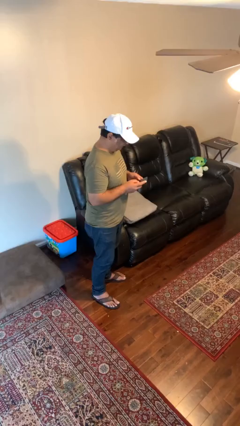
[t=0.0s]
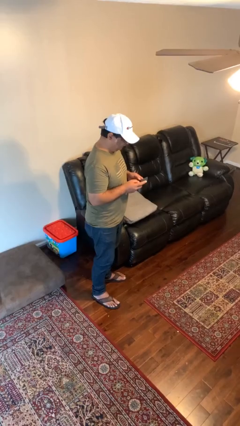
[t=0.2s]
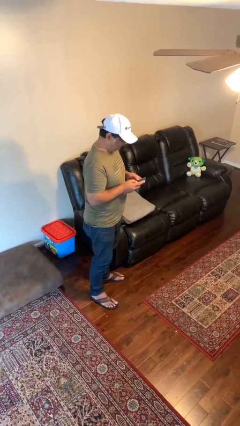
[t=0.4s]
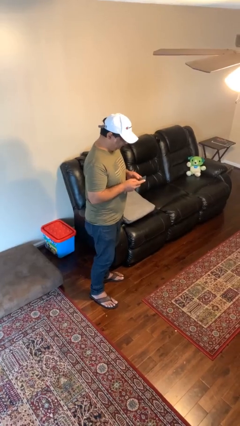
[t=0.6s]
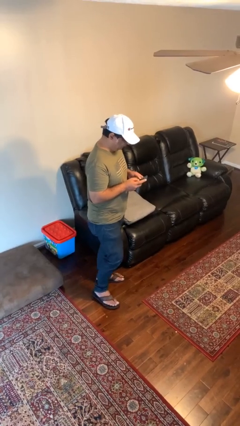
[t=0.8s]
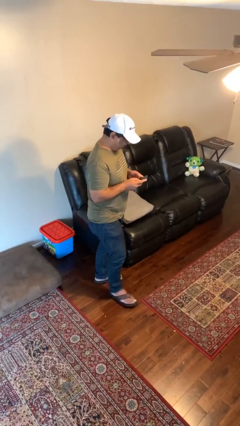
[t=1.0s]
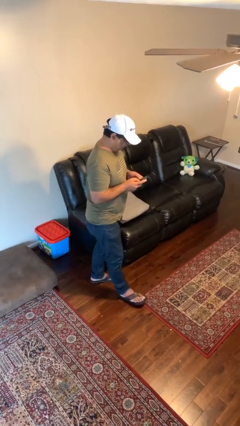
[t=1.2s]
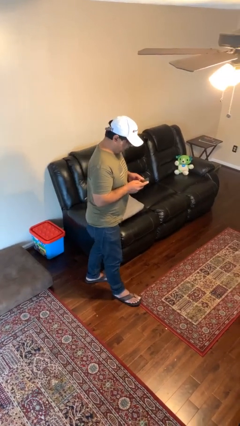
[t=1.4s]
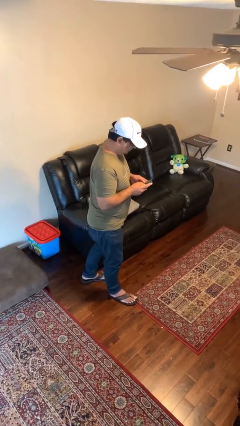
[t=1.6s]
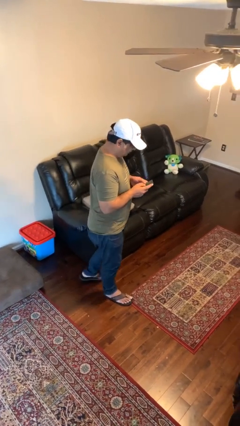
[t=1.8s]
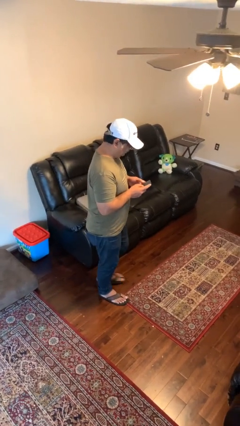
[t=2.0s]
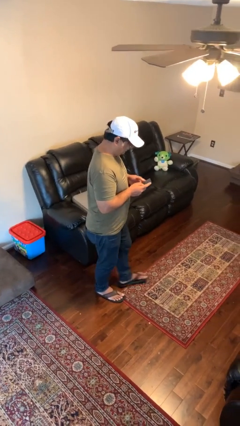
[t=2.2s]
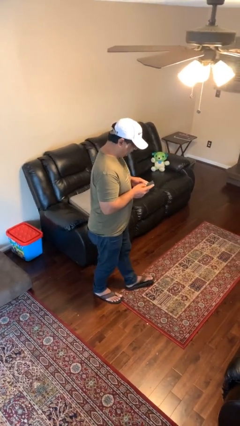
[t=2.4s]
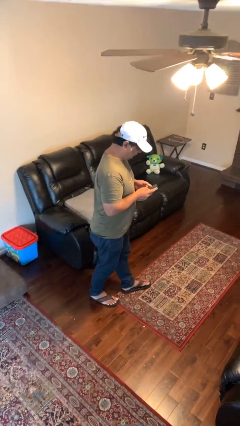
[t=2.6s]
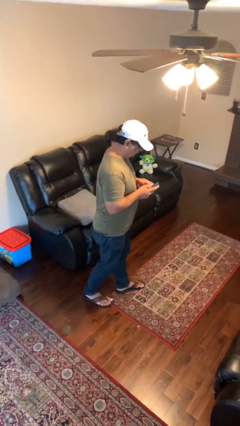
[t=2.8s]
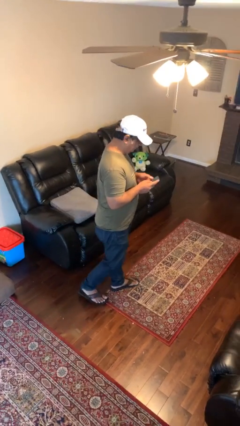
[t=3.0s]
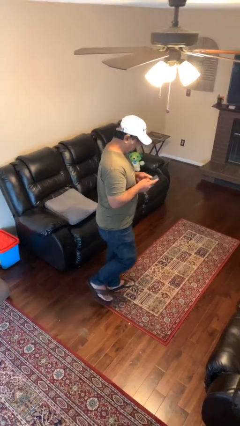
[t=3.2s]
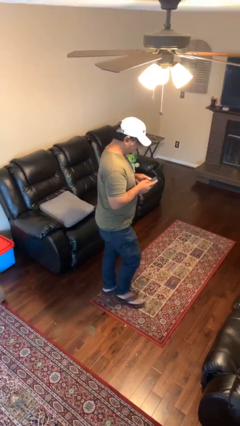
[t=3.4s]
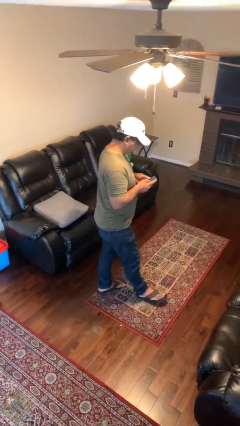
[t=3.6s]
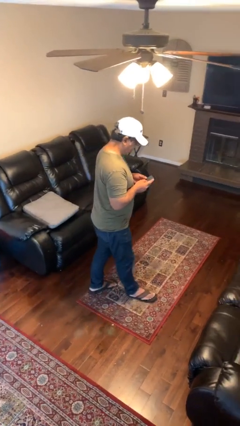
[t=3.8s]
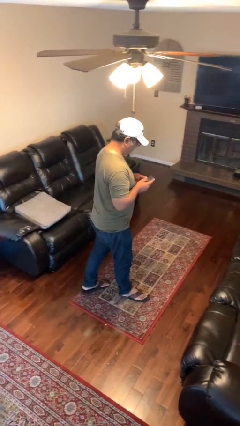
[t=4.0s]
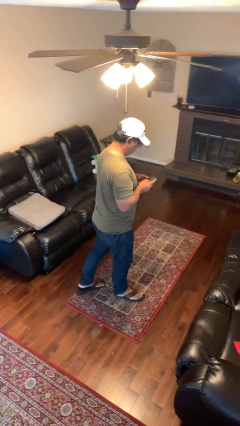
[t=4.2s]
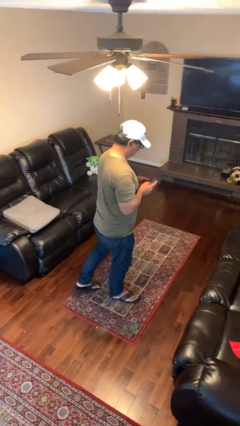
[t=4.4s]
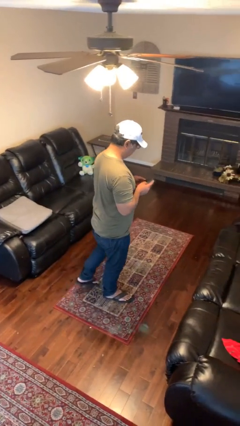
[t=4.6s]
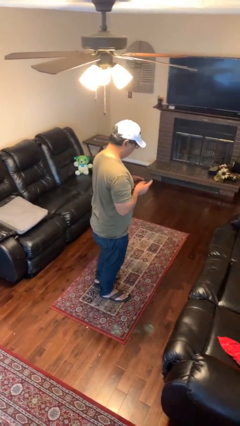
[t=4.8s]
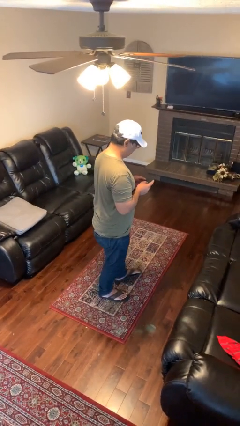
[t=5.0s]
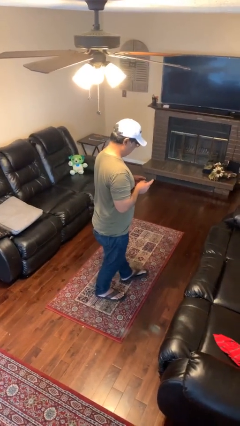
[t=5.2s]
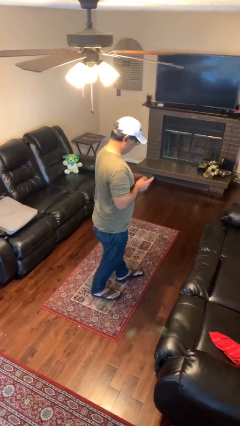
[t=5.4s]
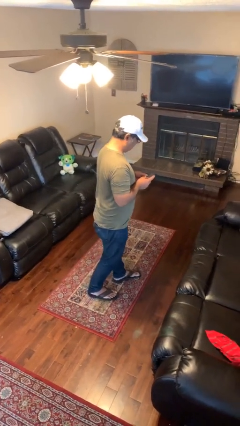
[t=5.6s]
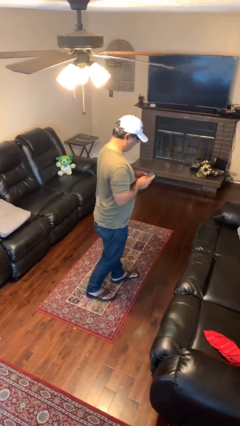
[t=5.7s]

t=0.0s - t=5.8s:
person texts on phone

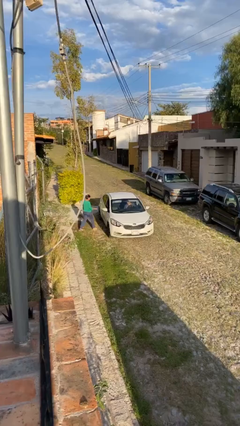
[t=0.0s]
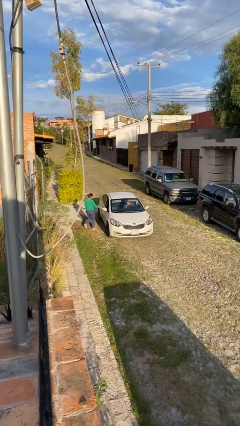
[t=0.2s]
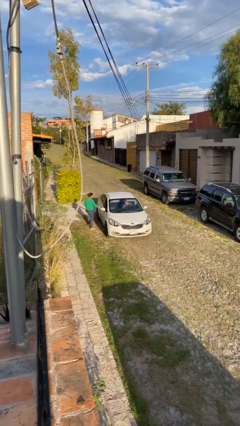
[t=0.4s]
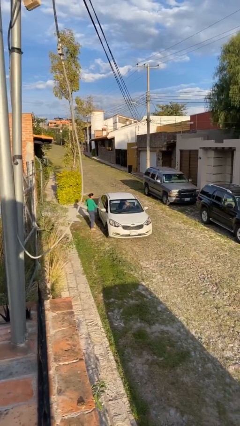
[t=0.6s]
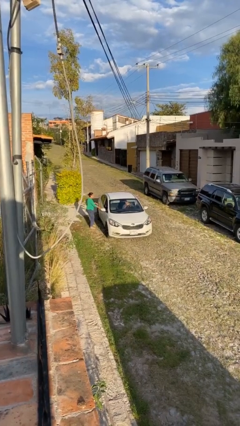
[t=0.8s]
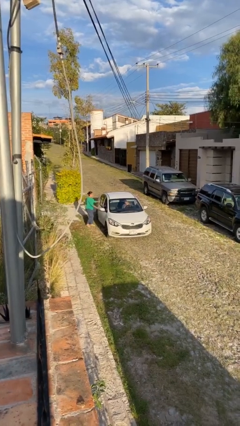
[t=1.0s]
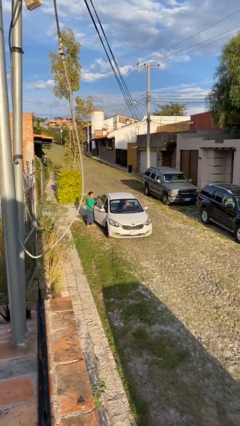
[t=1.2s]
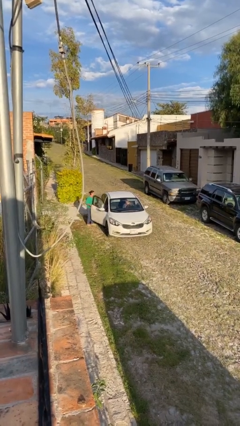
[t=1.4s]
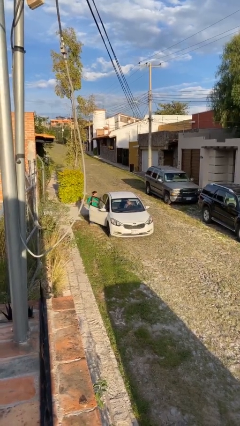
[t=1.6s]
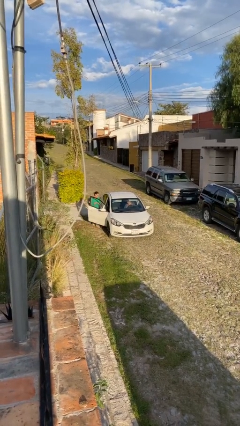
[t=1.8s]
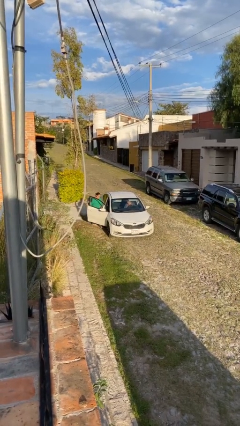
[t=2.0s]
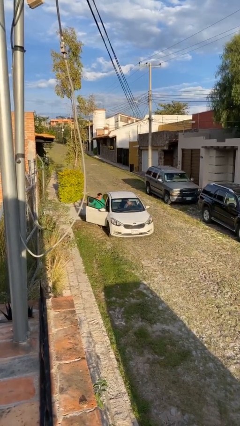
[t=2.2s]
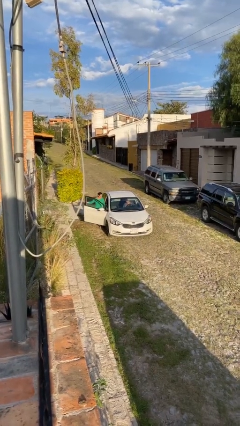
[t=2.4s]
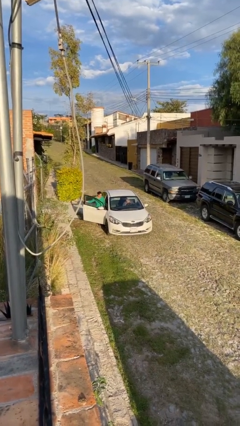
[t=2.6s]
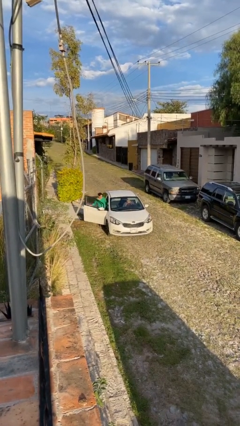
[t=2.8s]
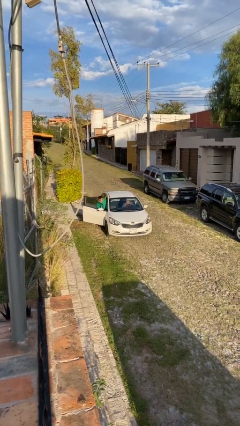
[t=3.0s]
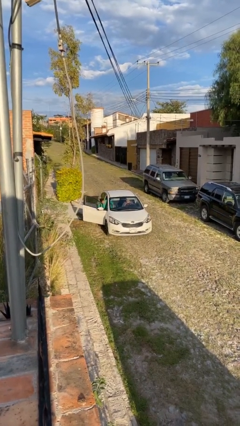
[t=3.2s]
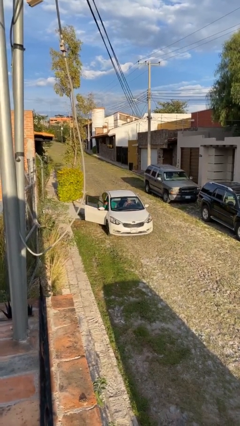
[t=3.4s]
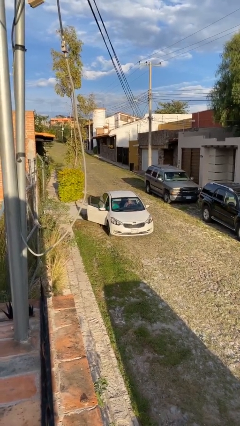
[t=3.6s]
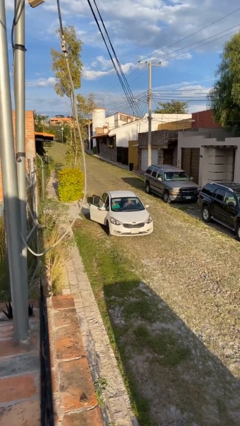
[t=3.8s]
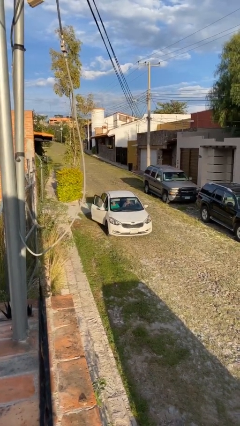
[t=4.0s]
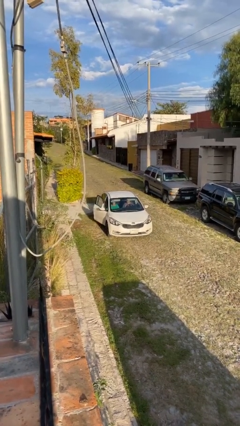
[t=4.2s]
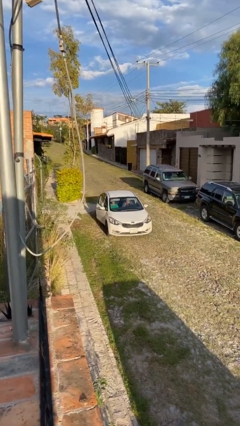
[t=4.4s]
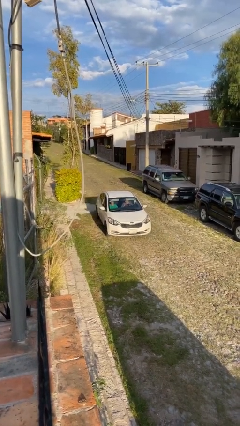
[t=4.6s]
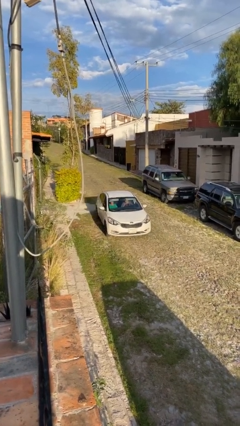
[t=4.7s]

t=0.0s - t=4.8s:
car picks up person

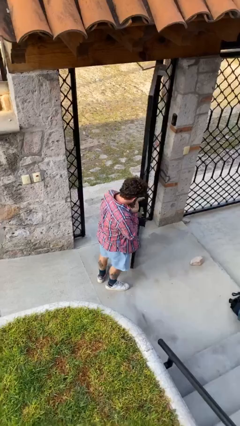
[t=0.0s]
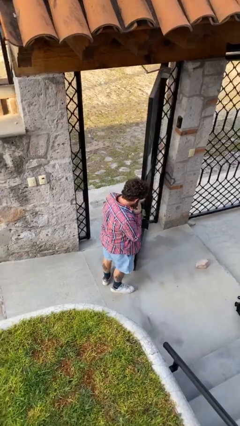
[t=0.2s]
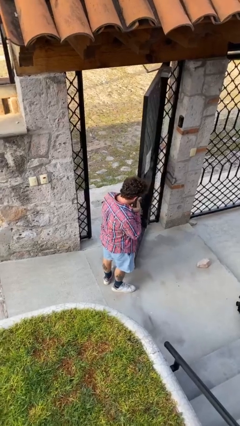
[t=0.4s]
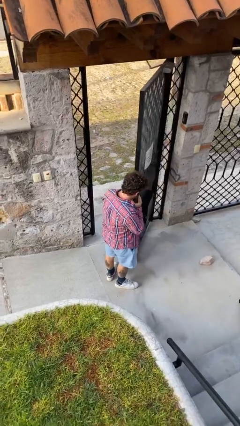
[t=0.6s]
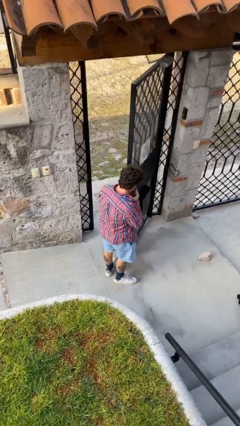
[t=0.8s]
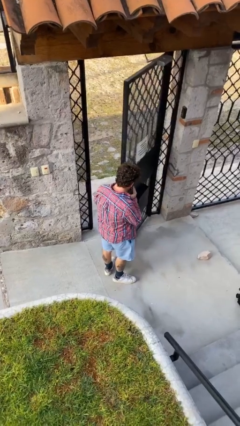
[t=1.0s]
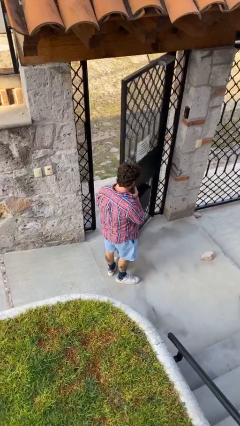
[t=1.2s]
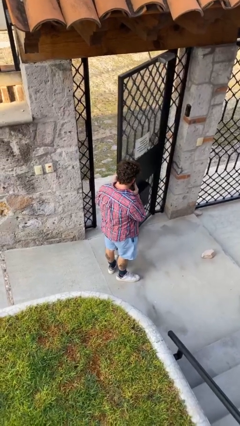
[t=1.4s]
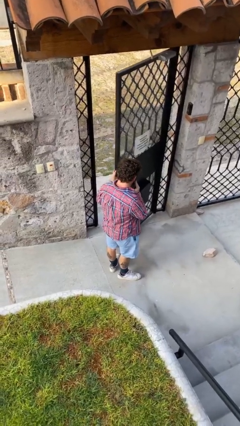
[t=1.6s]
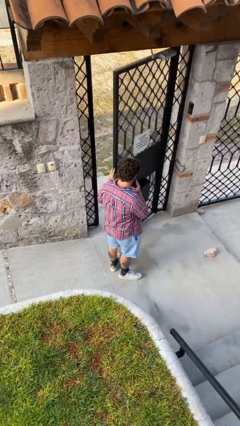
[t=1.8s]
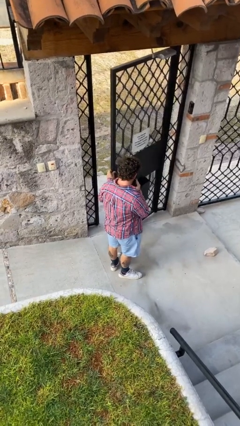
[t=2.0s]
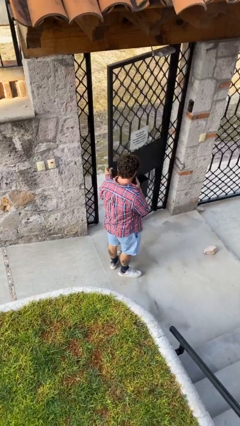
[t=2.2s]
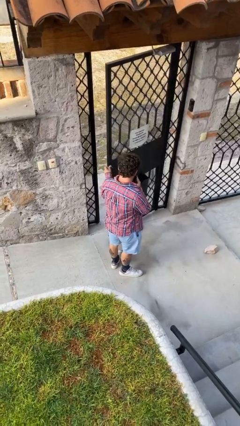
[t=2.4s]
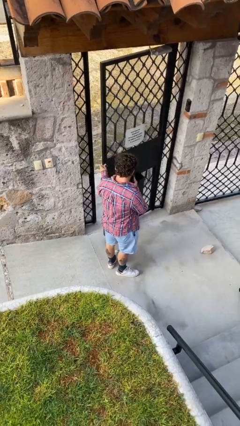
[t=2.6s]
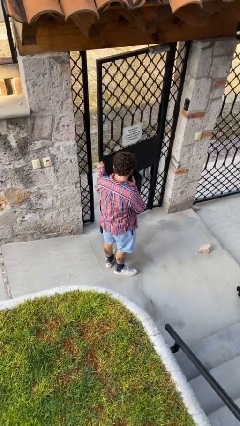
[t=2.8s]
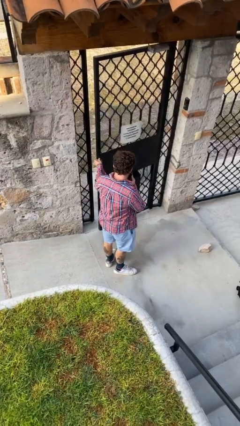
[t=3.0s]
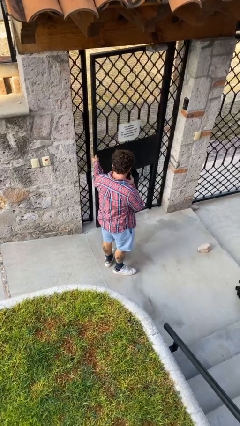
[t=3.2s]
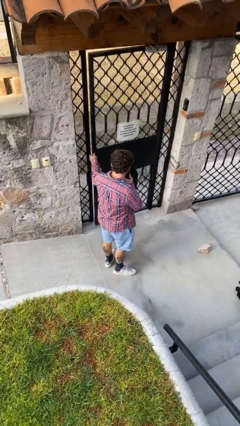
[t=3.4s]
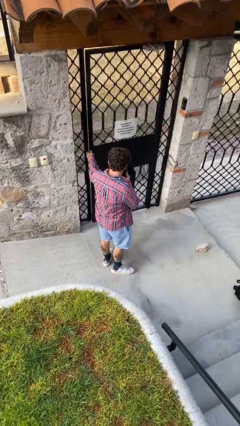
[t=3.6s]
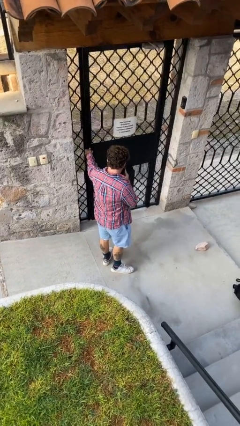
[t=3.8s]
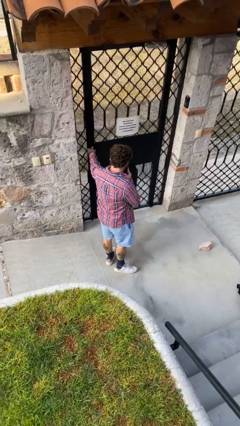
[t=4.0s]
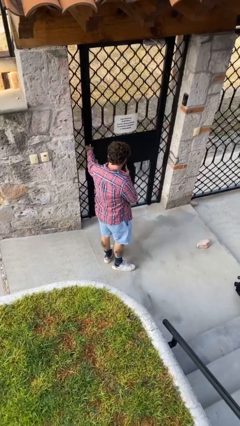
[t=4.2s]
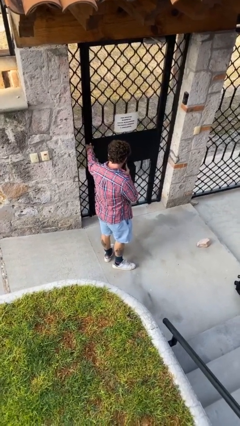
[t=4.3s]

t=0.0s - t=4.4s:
person closes facility door

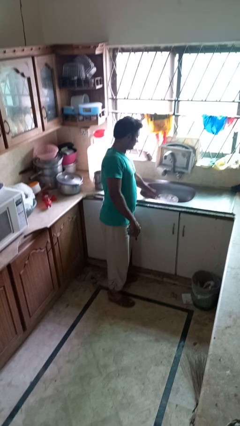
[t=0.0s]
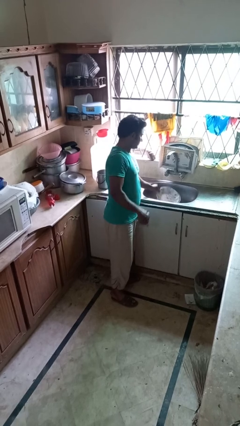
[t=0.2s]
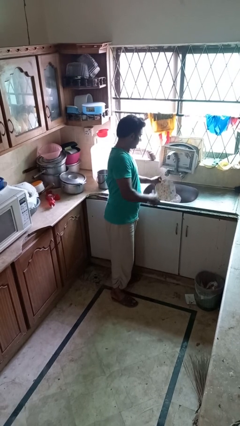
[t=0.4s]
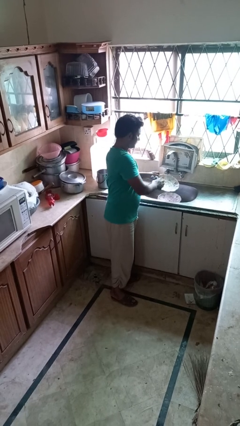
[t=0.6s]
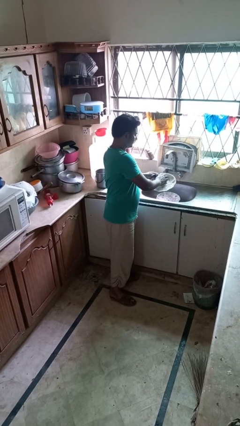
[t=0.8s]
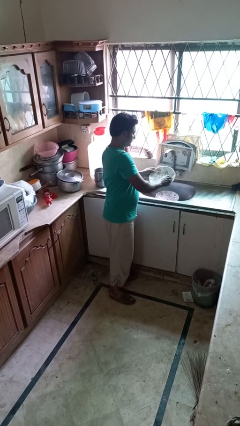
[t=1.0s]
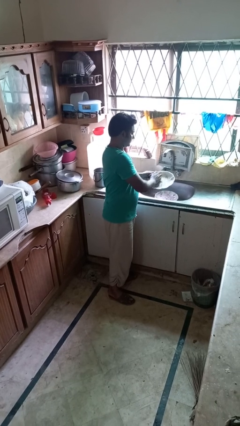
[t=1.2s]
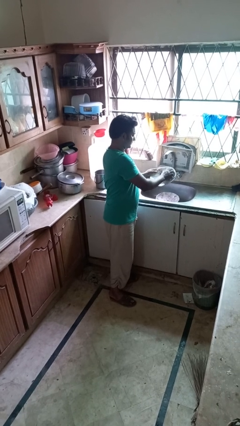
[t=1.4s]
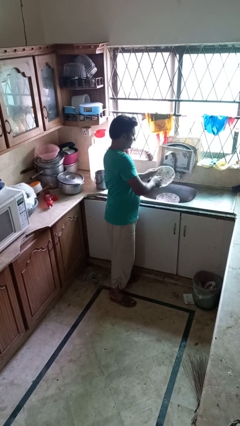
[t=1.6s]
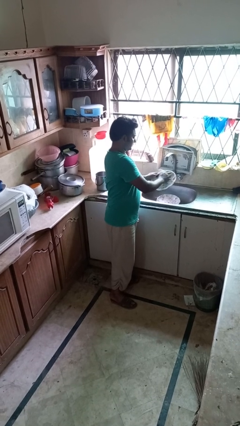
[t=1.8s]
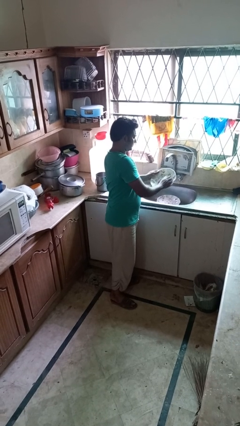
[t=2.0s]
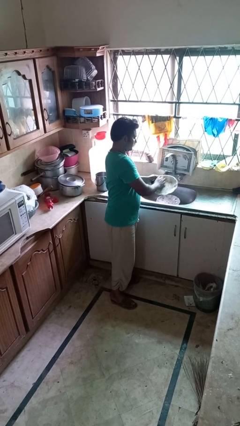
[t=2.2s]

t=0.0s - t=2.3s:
person dries dish

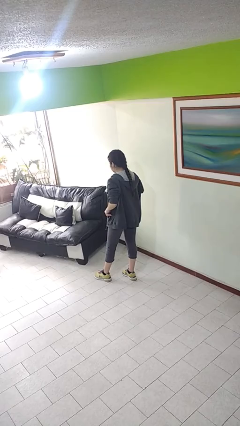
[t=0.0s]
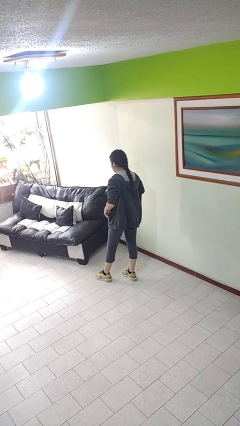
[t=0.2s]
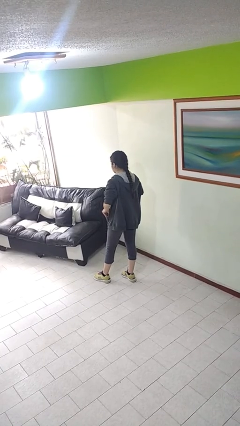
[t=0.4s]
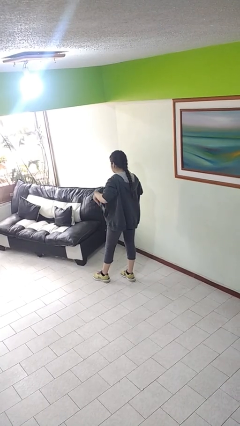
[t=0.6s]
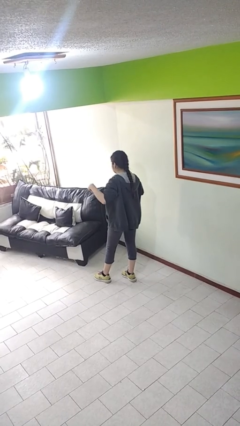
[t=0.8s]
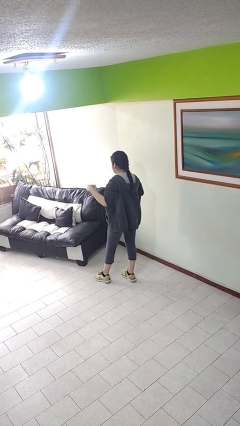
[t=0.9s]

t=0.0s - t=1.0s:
person takes phone from pocket
